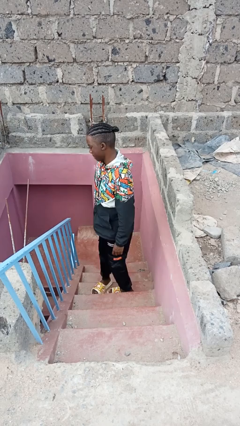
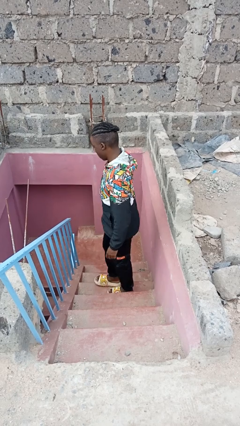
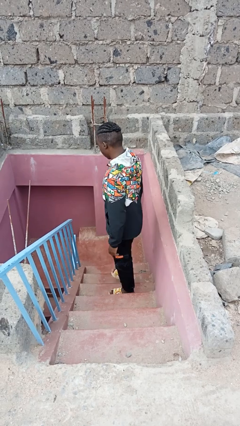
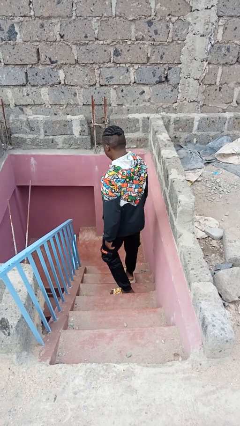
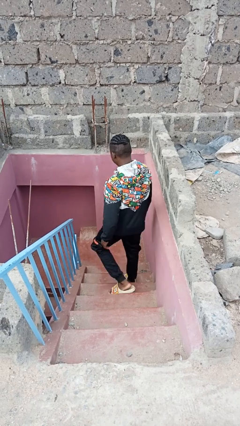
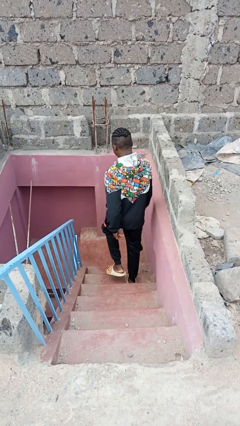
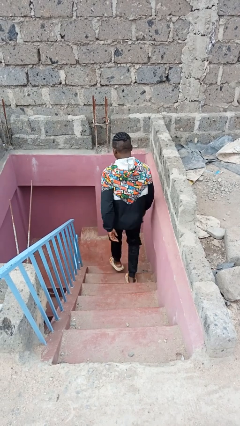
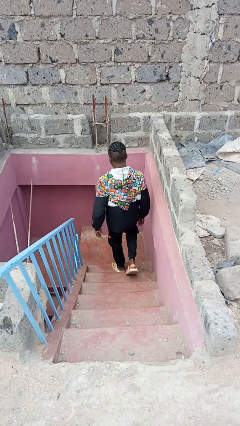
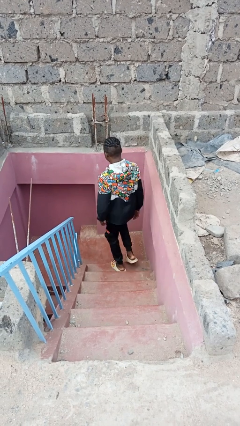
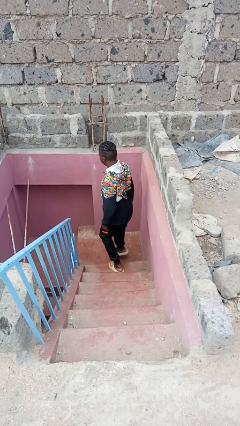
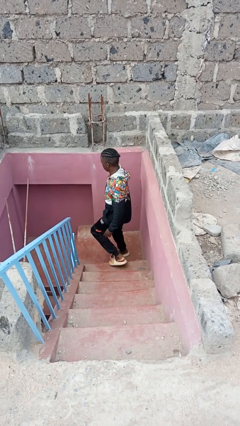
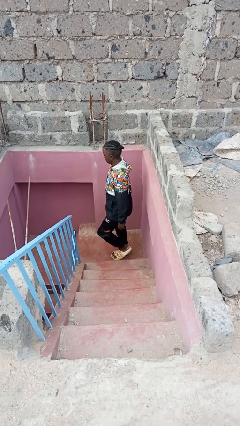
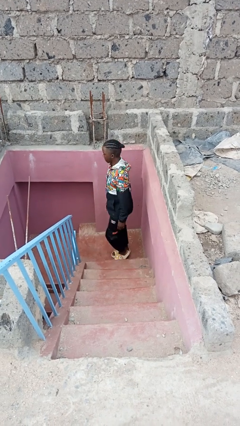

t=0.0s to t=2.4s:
person climbs down stairs

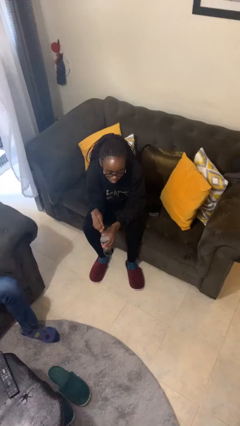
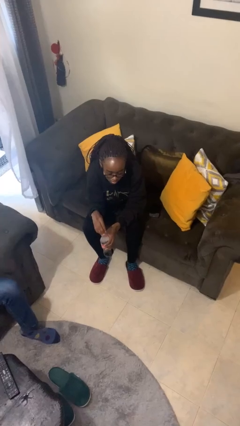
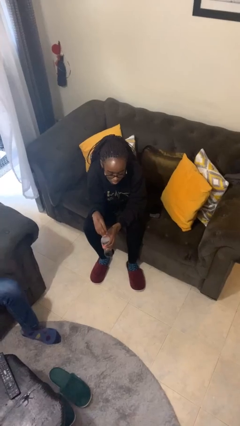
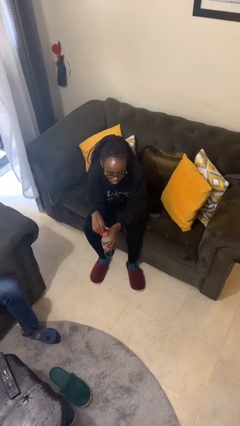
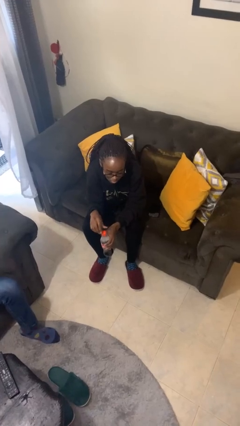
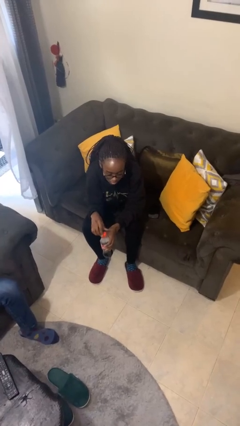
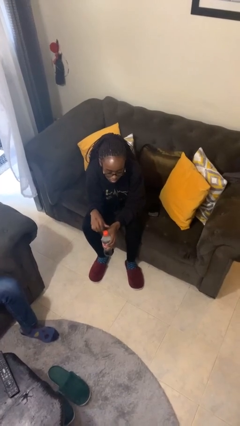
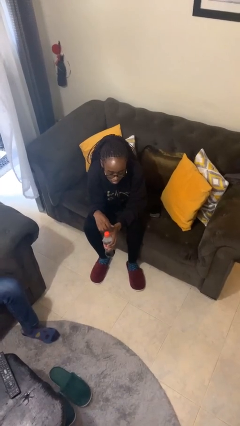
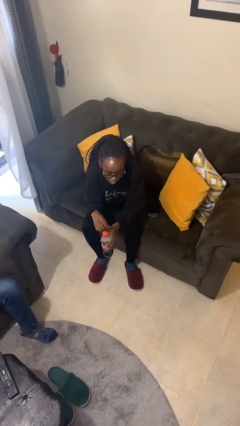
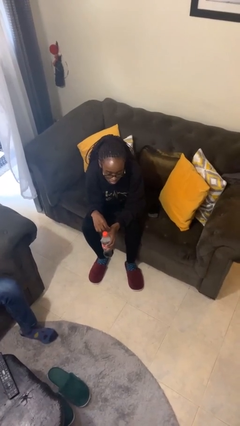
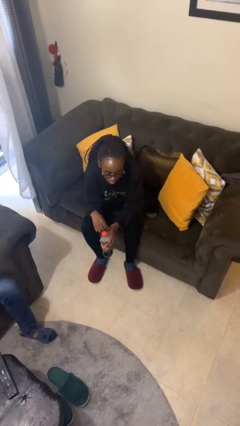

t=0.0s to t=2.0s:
person screws lid to bottle

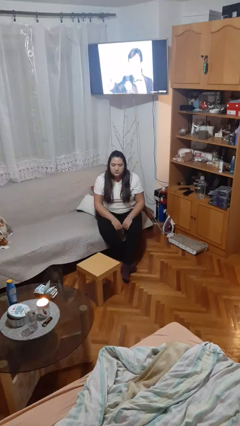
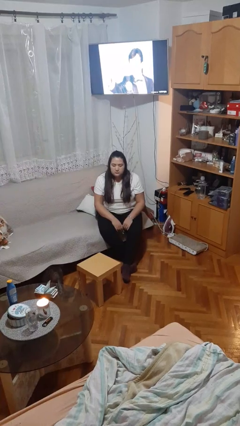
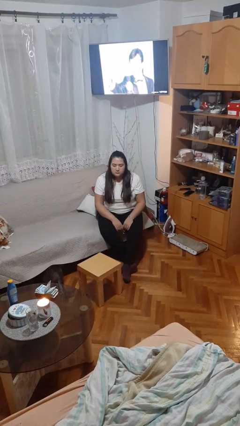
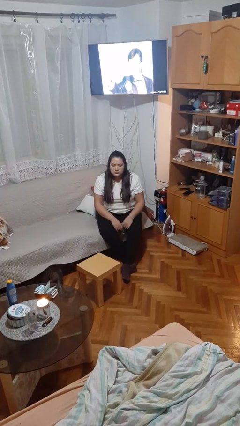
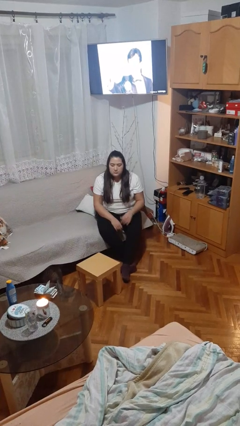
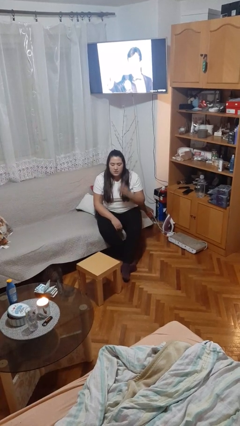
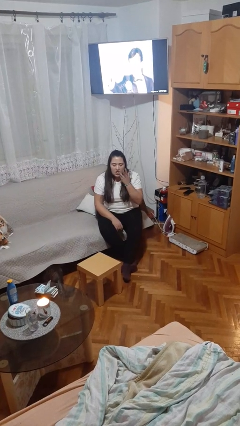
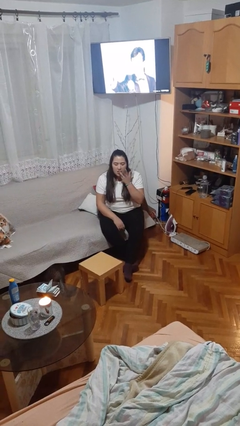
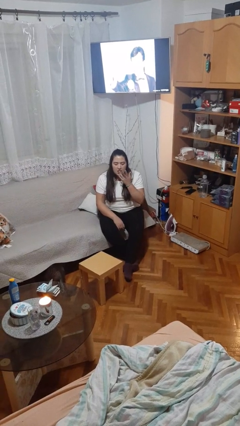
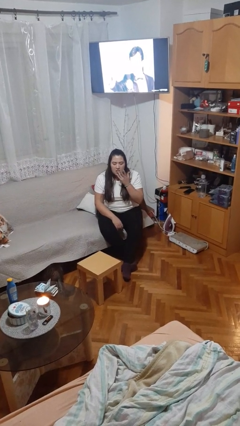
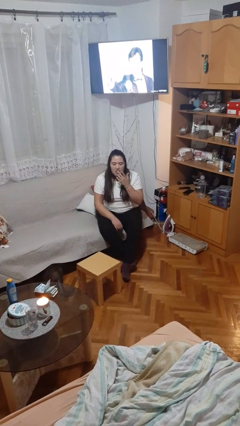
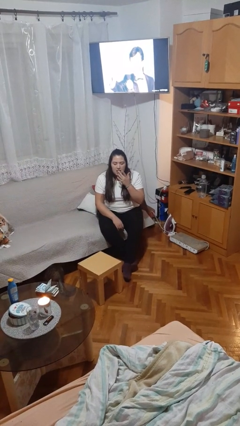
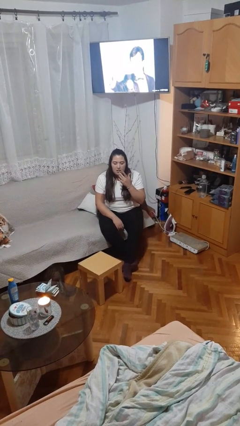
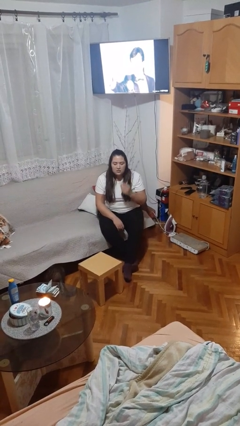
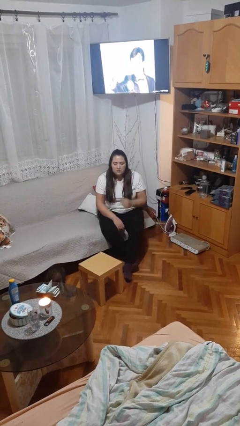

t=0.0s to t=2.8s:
person licks fingers

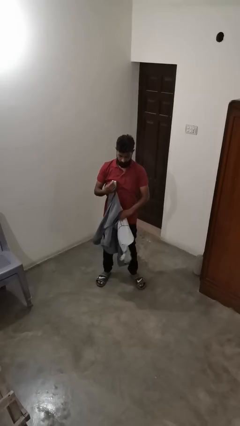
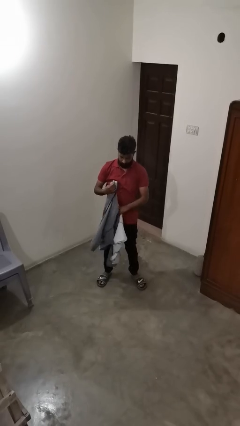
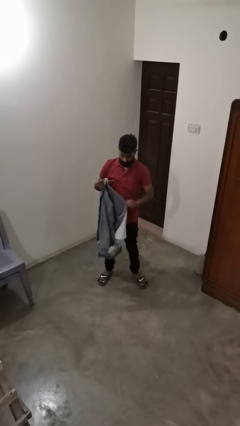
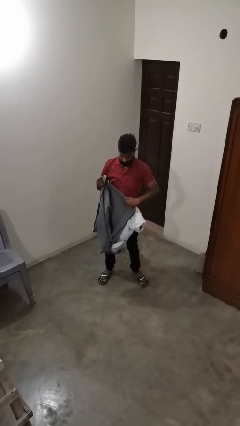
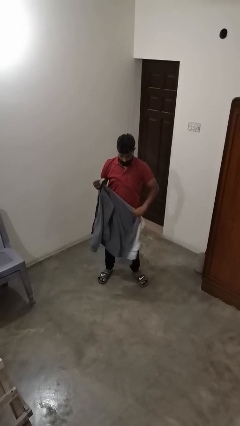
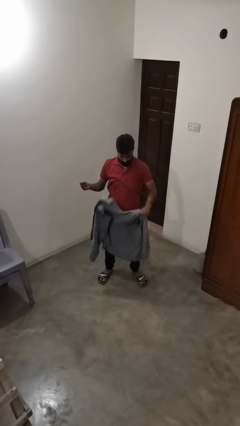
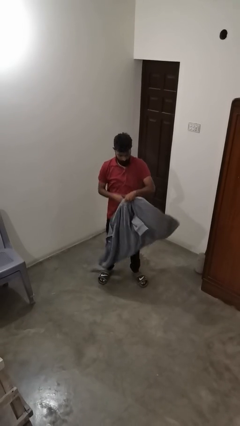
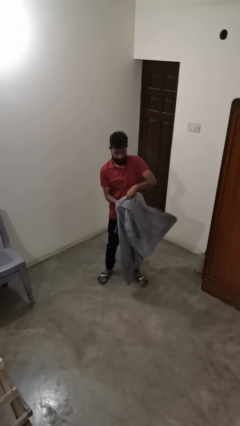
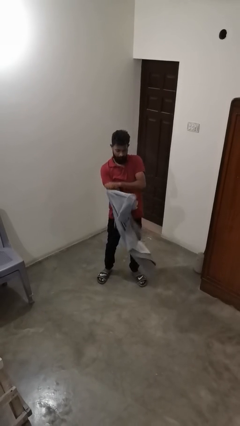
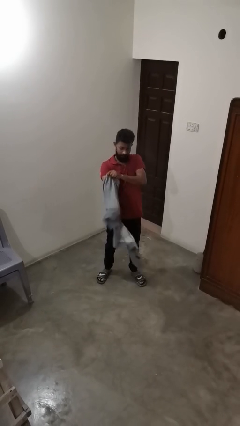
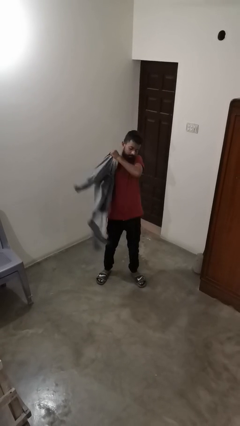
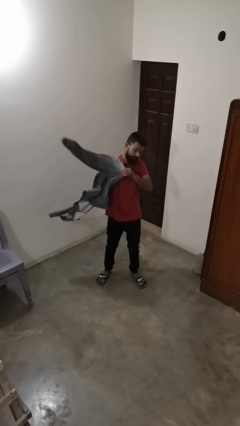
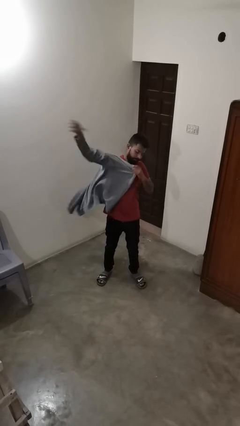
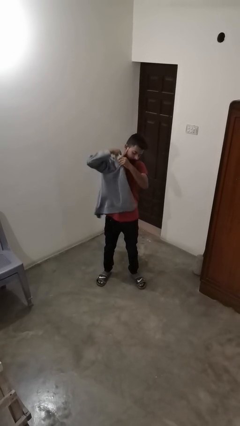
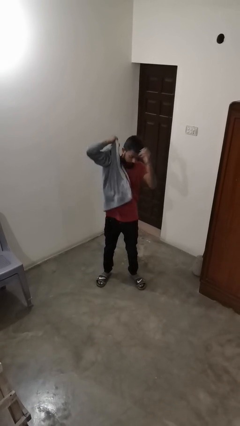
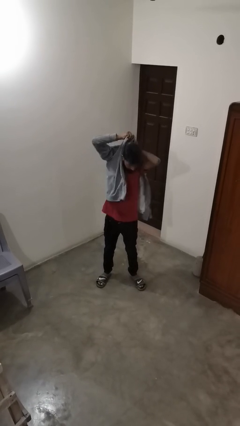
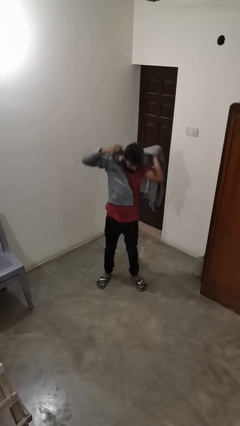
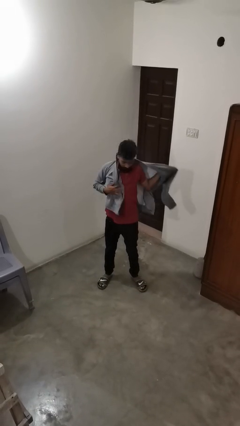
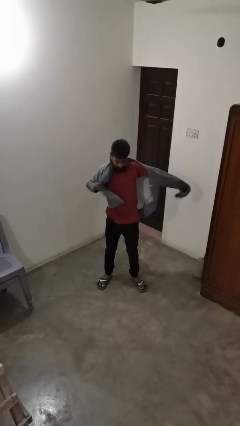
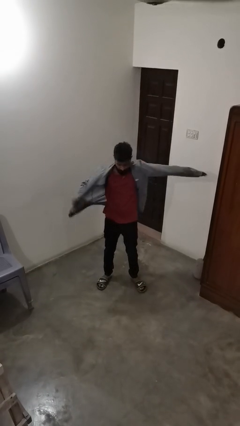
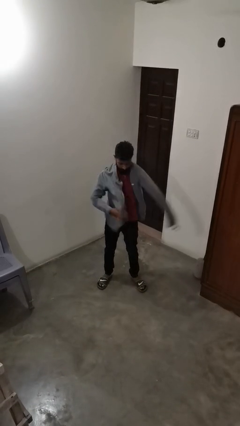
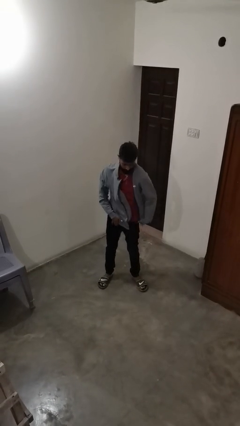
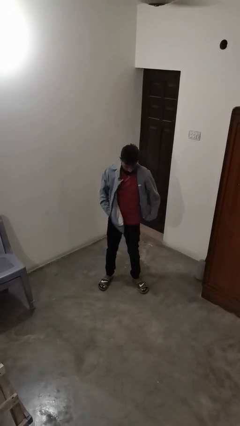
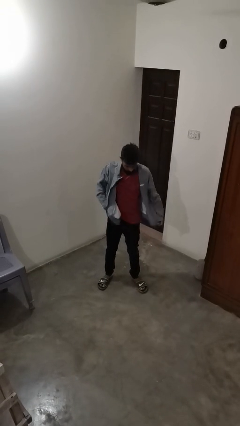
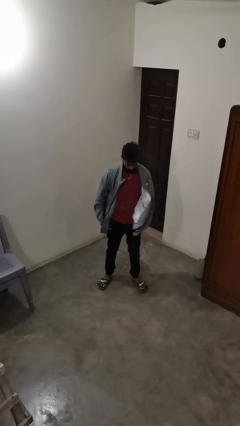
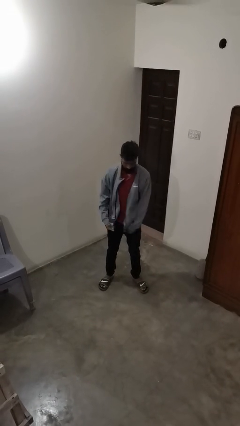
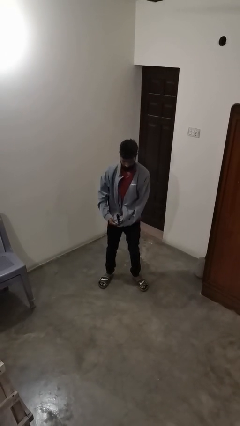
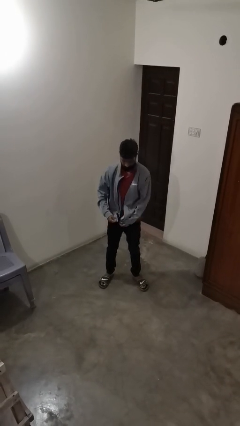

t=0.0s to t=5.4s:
person puts on jacket

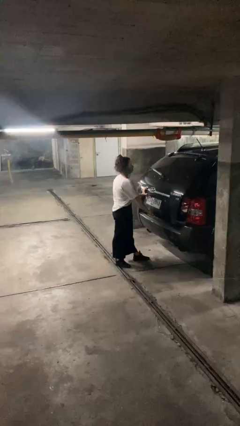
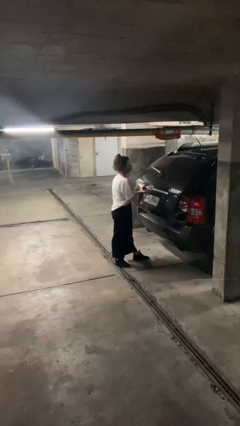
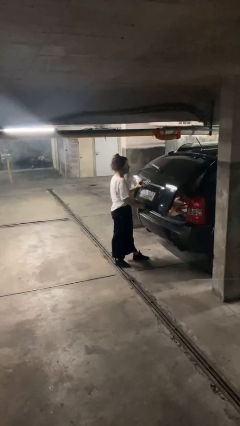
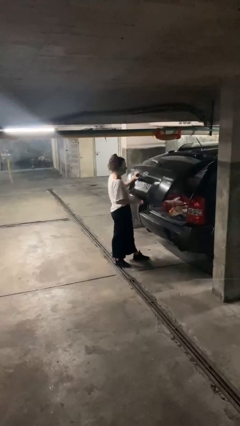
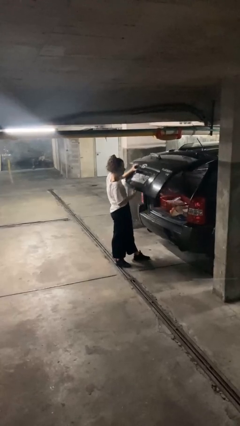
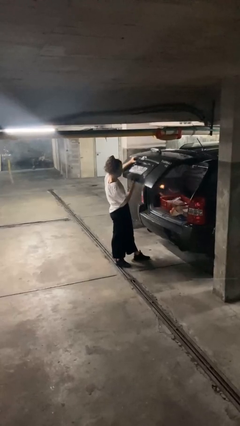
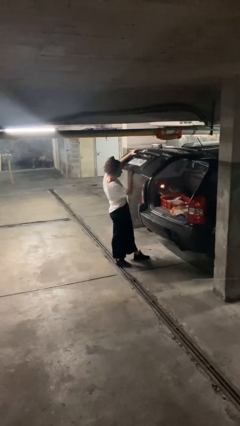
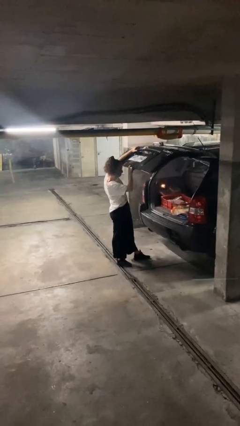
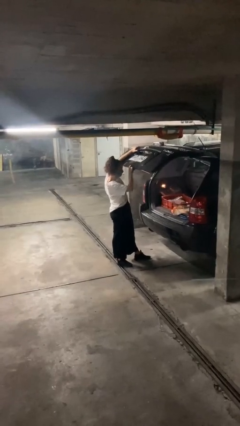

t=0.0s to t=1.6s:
person opens car trunk

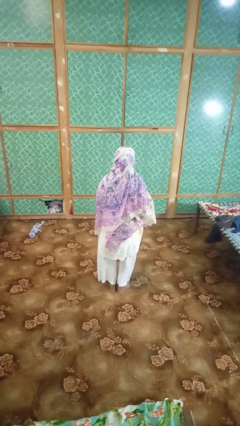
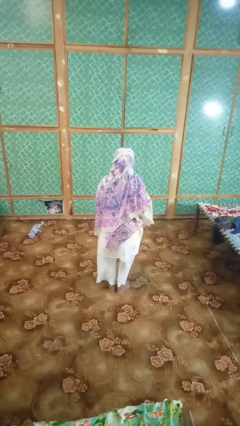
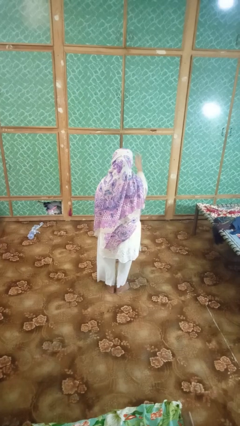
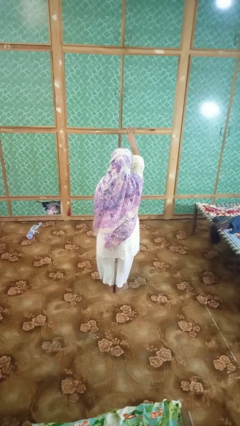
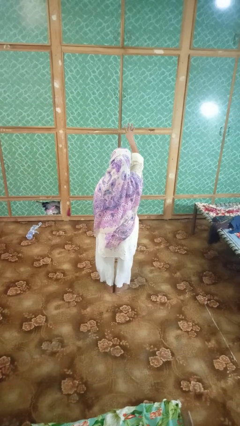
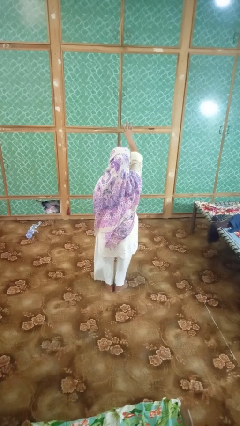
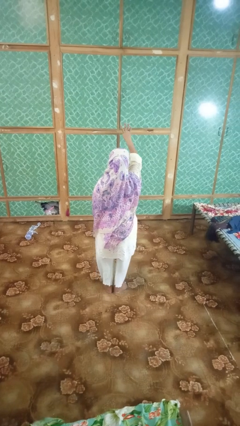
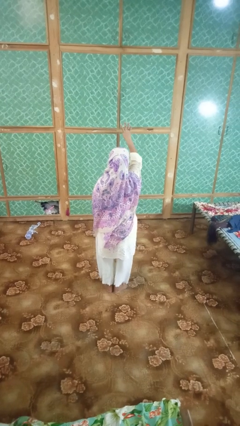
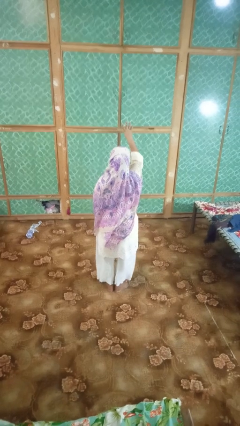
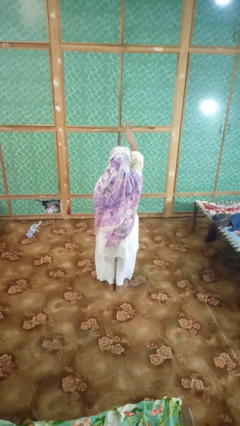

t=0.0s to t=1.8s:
person gestures number four

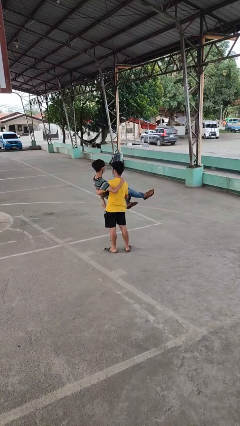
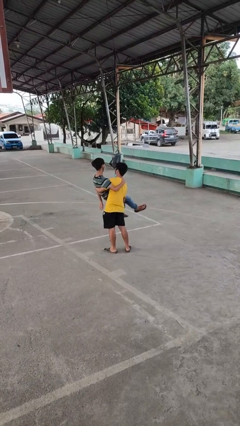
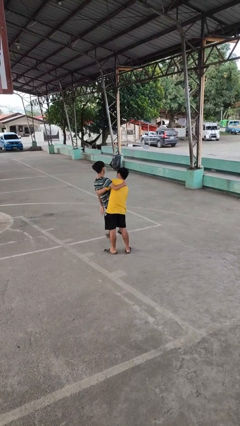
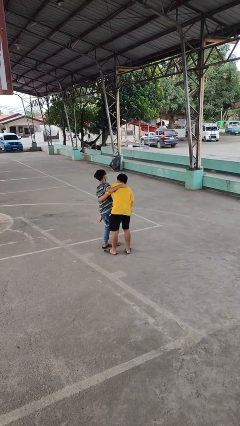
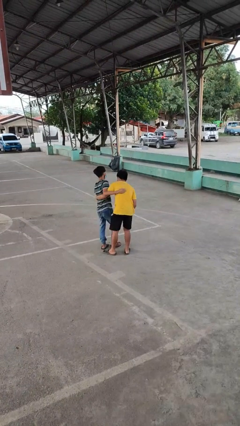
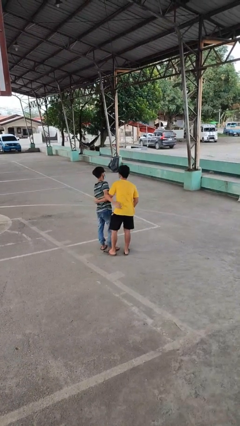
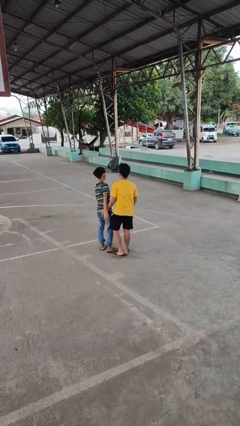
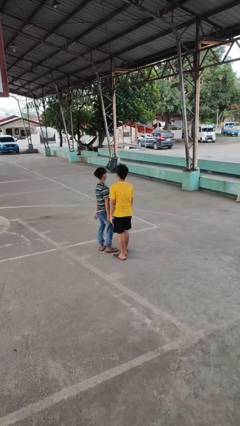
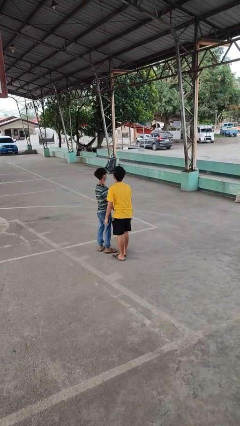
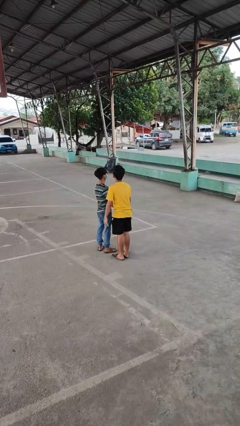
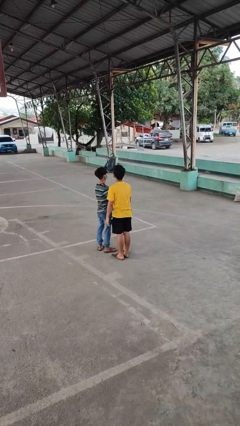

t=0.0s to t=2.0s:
person puts down person
